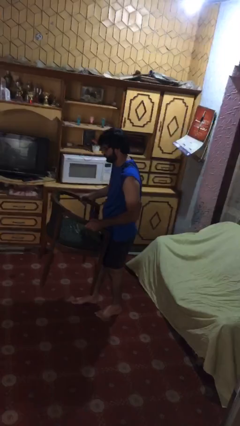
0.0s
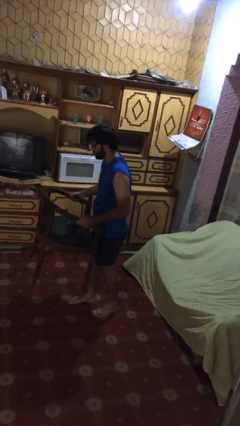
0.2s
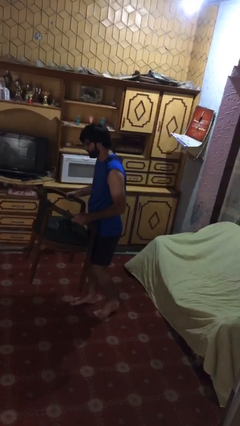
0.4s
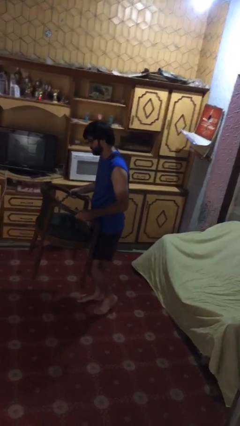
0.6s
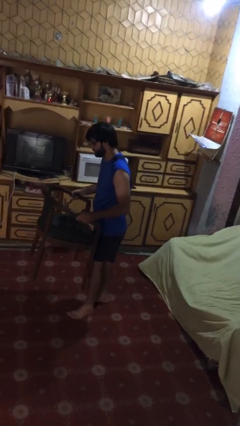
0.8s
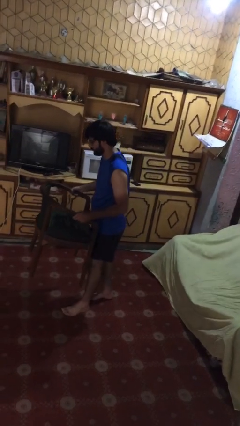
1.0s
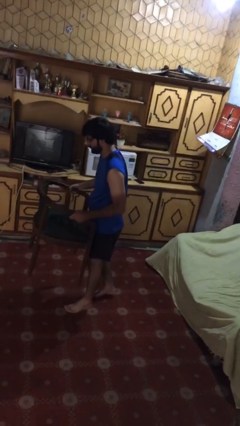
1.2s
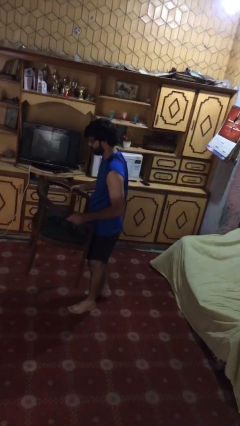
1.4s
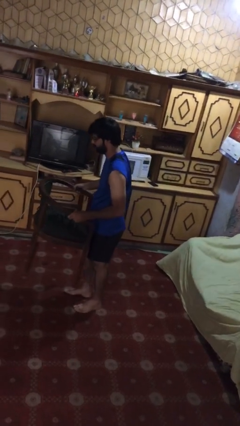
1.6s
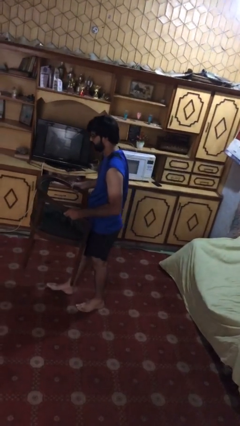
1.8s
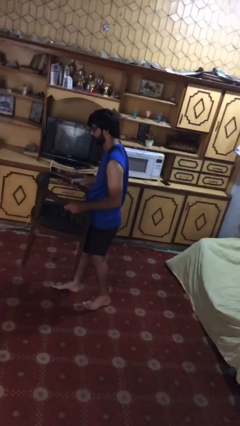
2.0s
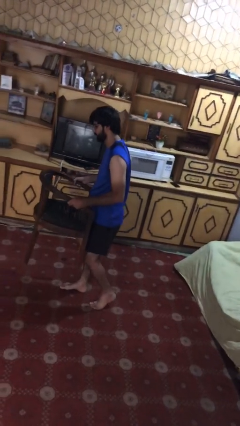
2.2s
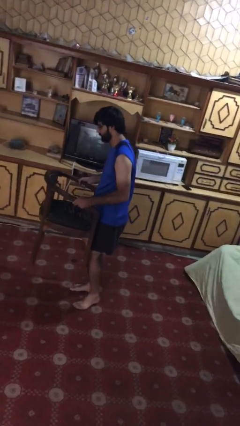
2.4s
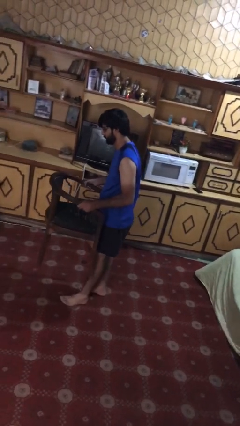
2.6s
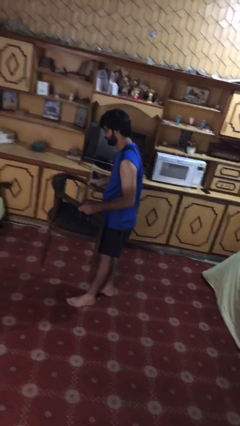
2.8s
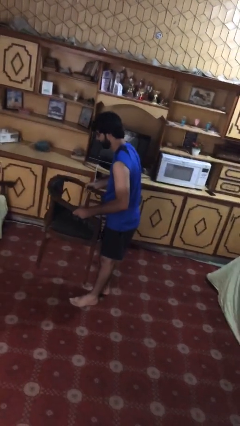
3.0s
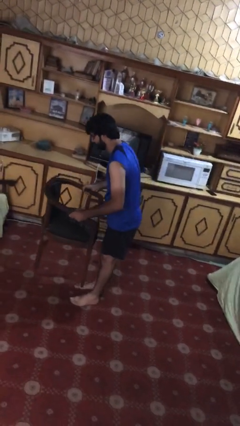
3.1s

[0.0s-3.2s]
person carries heavy object

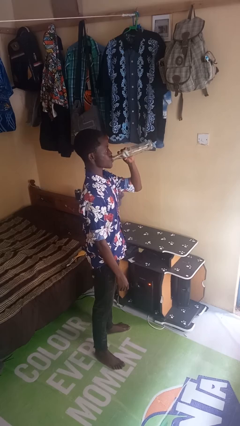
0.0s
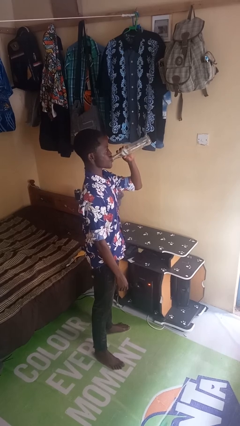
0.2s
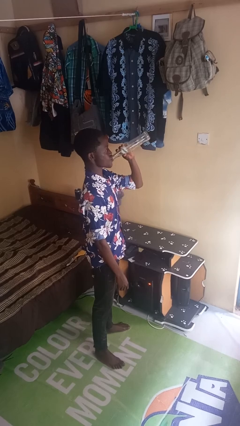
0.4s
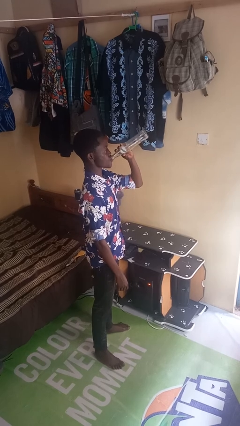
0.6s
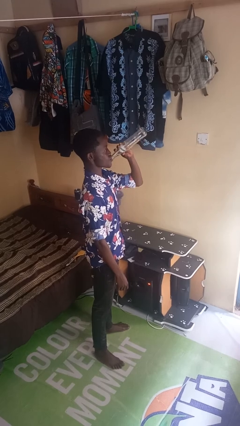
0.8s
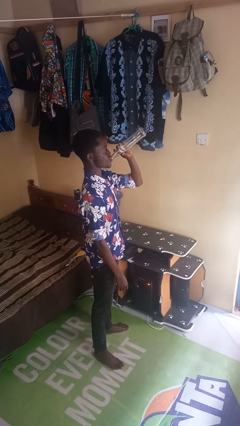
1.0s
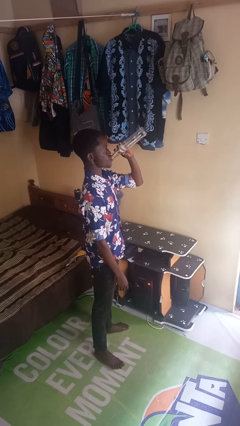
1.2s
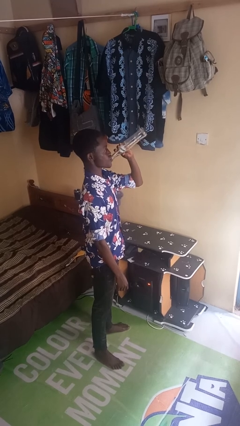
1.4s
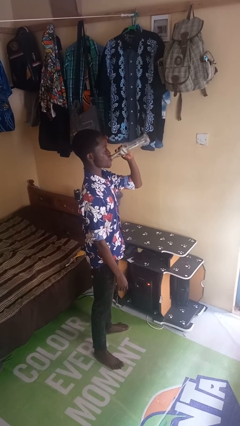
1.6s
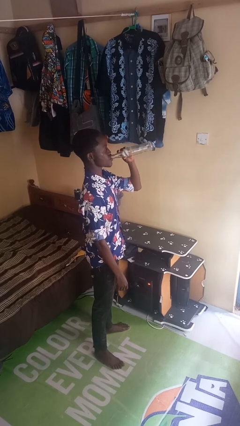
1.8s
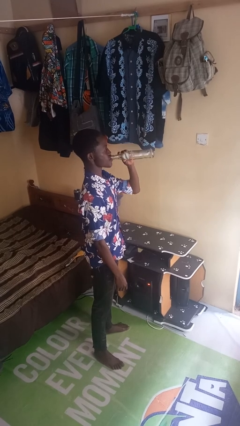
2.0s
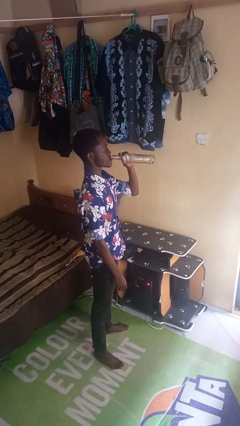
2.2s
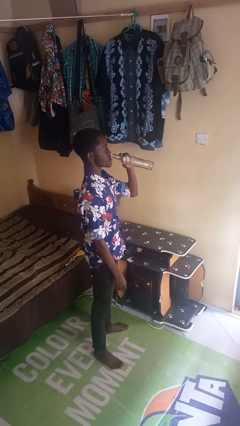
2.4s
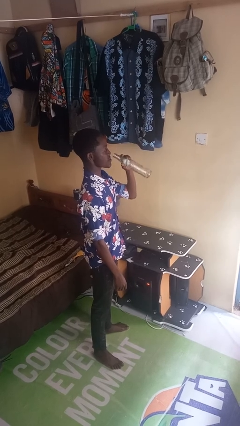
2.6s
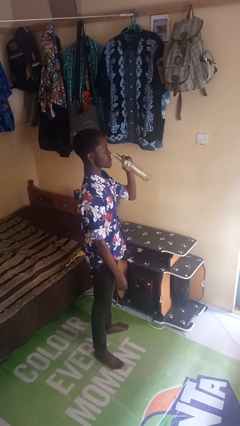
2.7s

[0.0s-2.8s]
person drinks from bottle

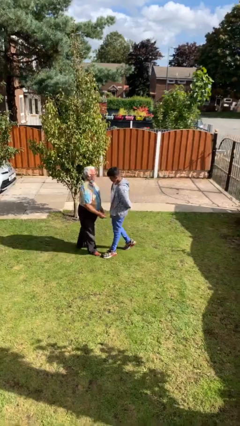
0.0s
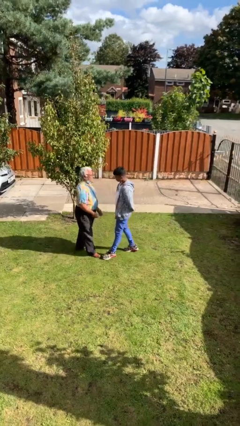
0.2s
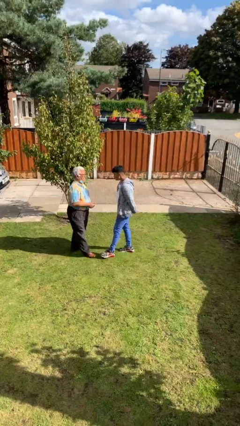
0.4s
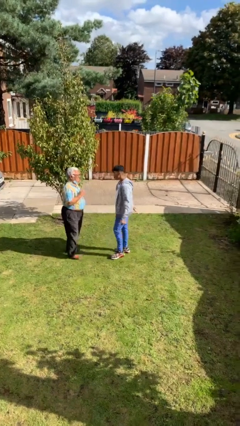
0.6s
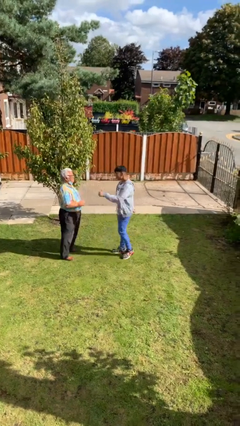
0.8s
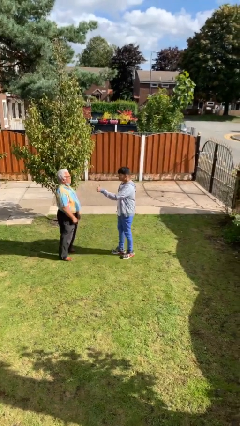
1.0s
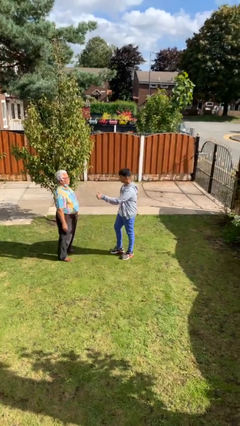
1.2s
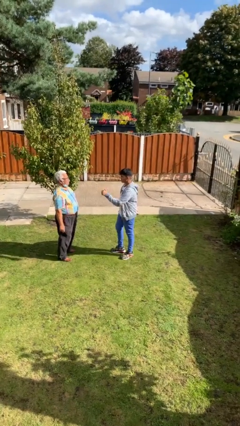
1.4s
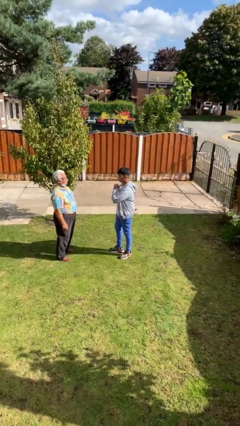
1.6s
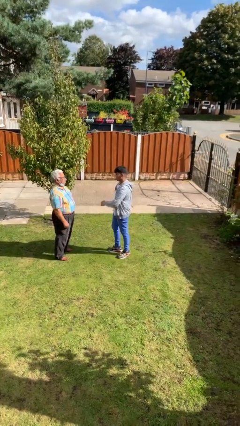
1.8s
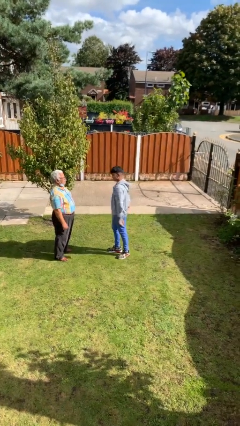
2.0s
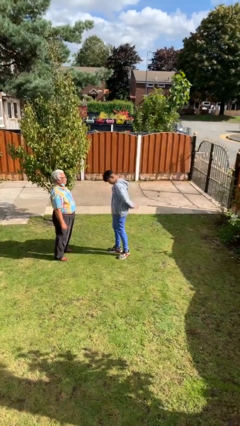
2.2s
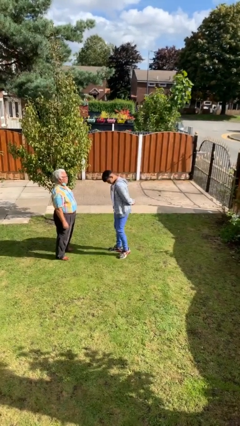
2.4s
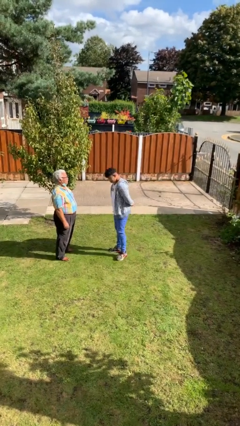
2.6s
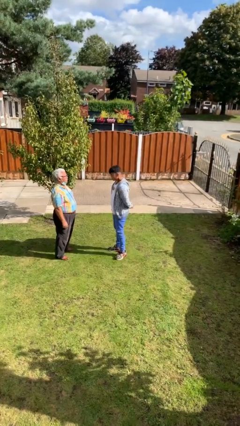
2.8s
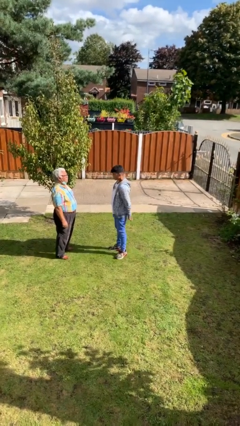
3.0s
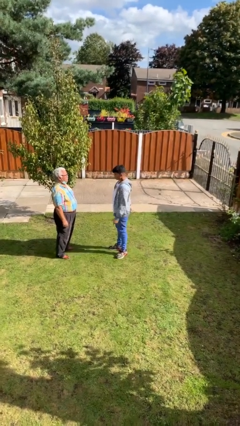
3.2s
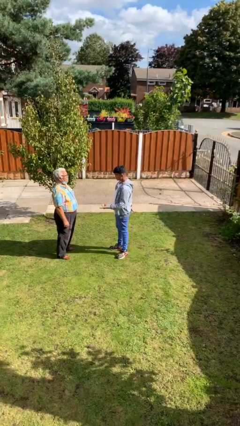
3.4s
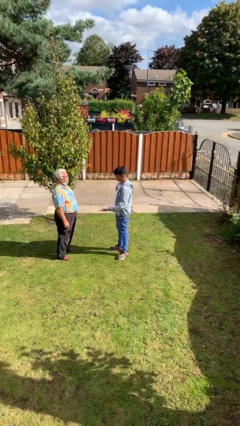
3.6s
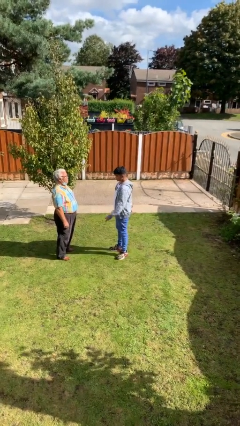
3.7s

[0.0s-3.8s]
person talks to person

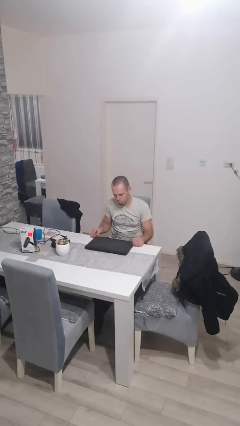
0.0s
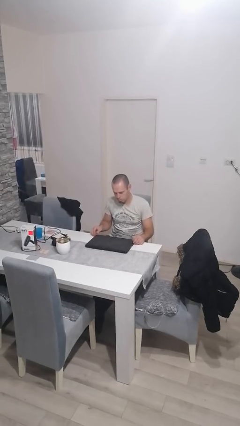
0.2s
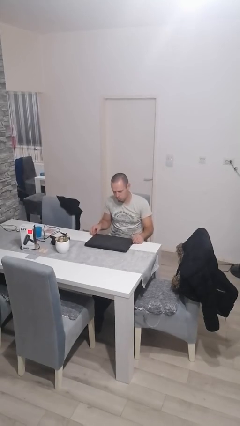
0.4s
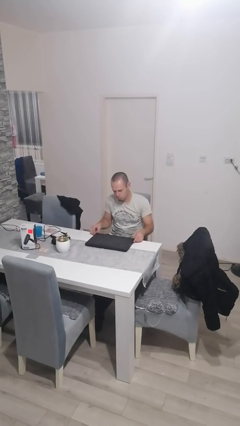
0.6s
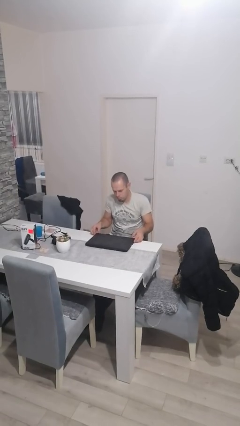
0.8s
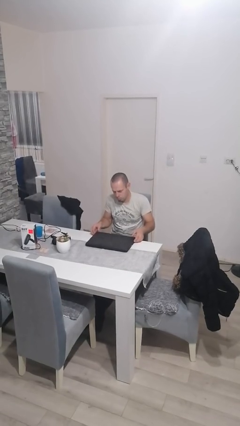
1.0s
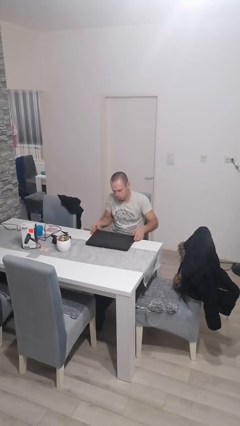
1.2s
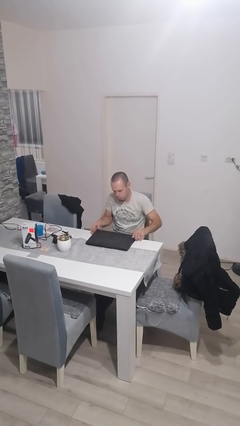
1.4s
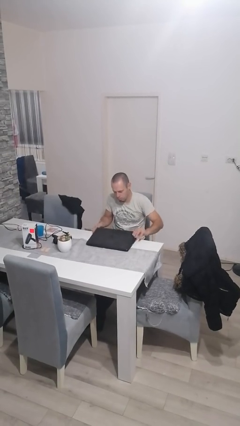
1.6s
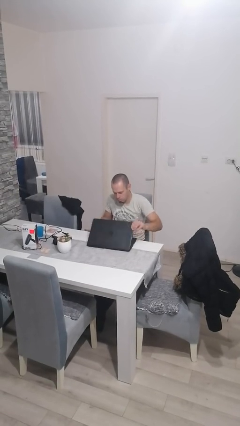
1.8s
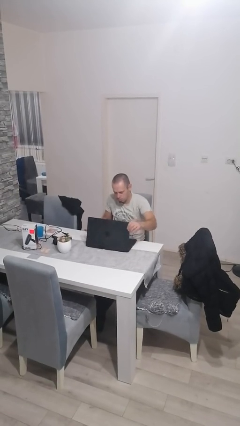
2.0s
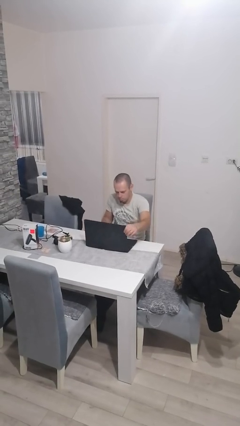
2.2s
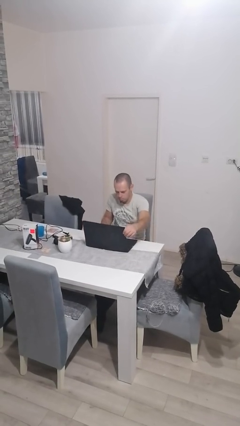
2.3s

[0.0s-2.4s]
person opens laptop

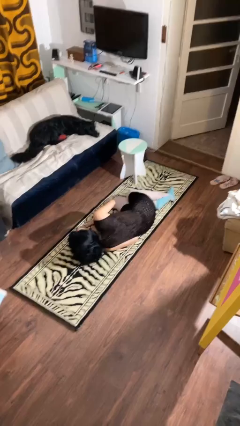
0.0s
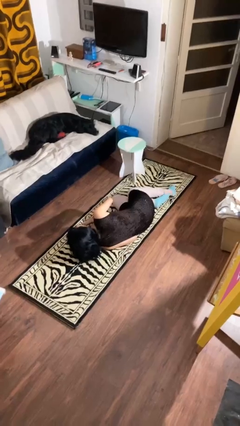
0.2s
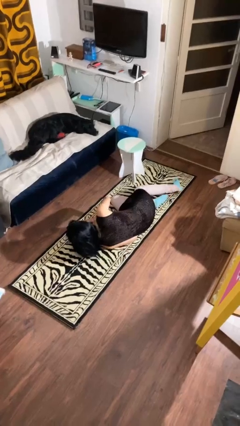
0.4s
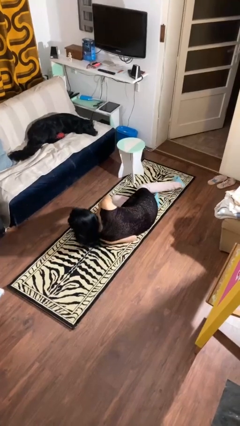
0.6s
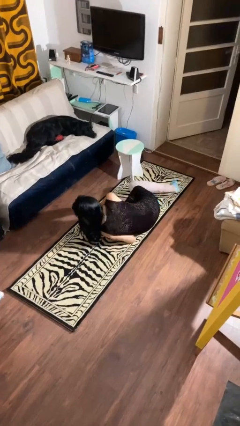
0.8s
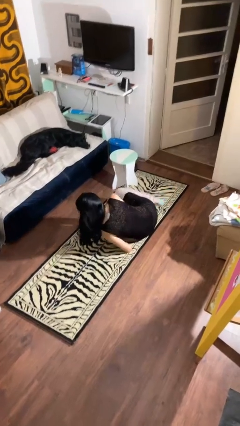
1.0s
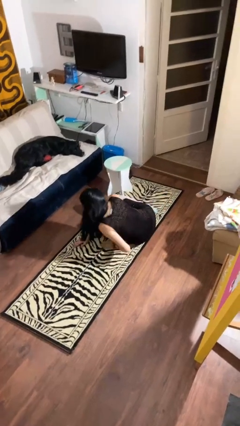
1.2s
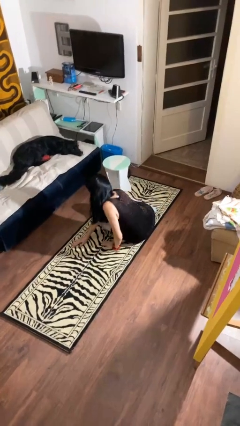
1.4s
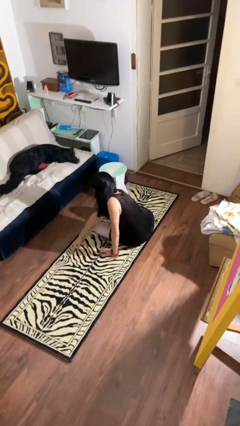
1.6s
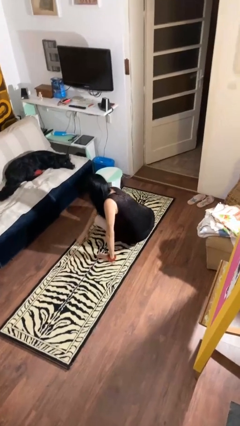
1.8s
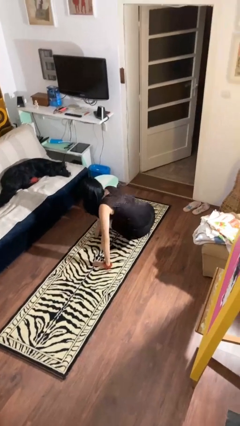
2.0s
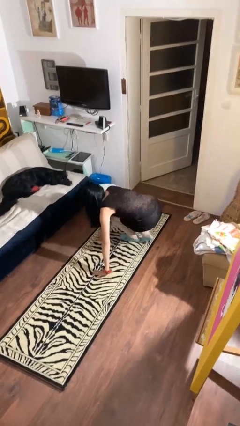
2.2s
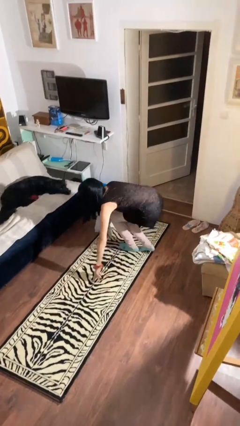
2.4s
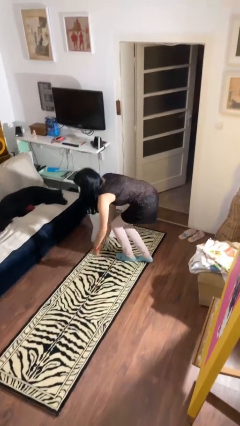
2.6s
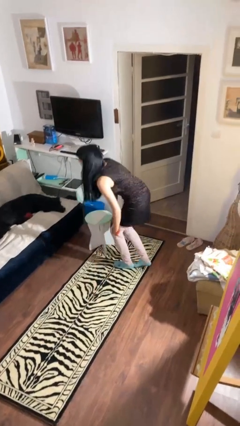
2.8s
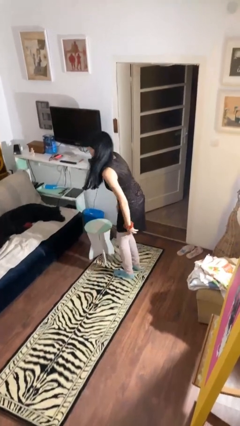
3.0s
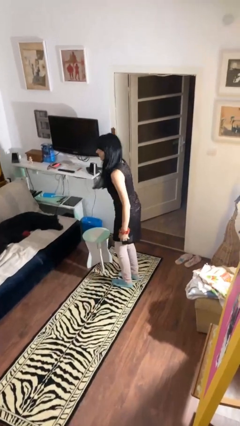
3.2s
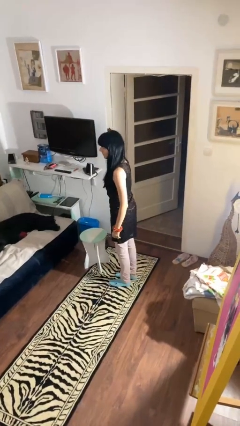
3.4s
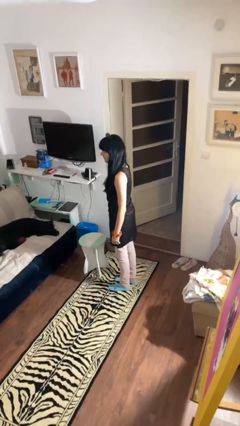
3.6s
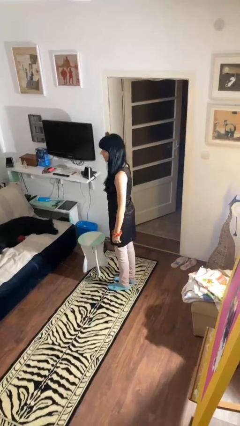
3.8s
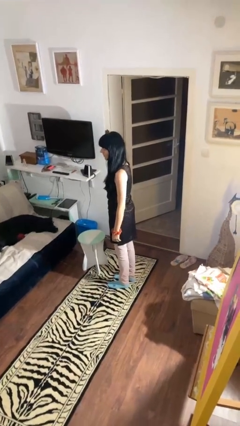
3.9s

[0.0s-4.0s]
person stands up from floor

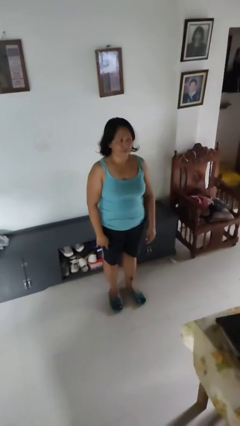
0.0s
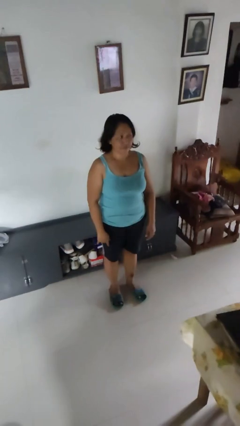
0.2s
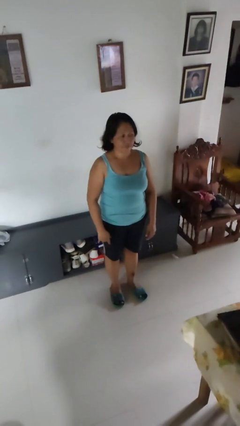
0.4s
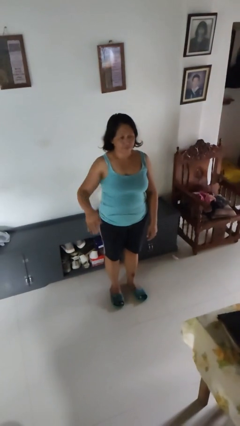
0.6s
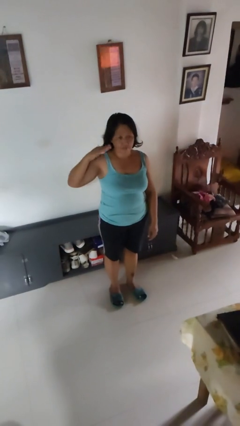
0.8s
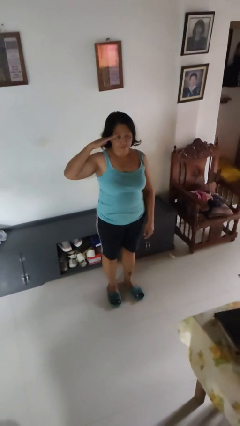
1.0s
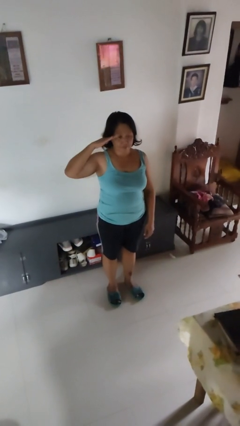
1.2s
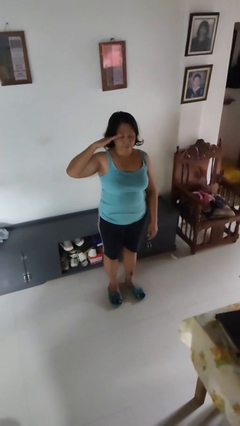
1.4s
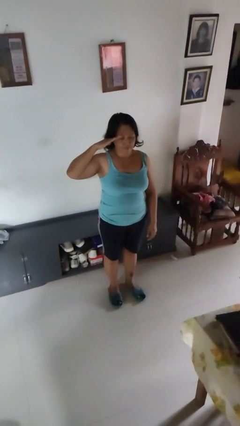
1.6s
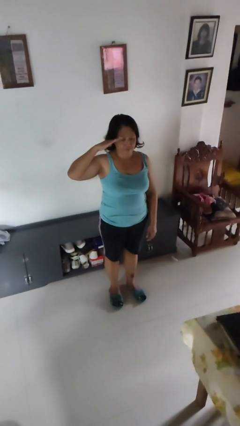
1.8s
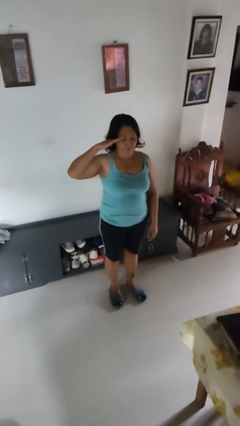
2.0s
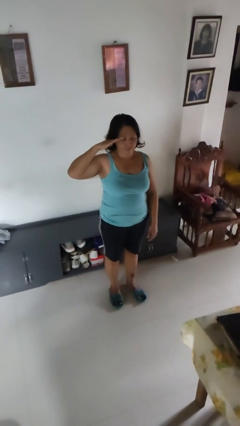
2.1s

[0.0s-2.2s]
person salutes
